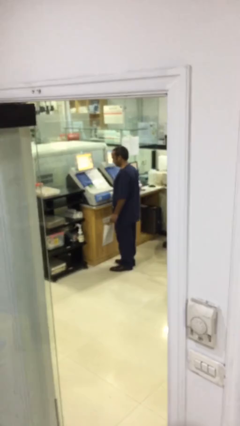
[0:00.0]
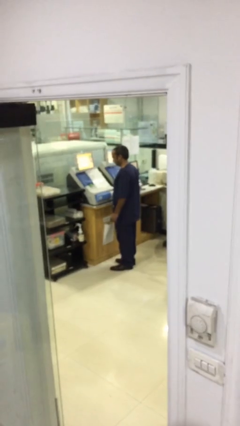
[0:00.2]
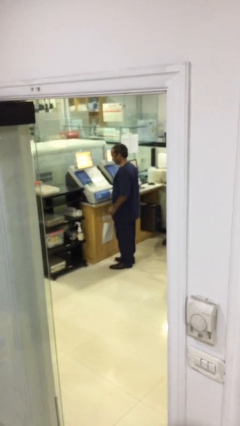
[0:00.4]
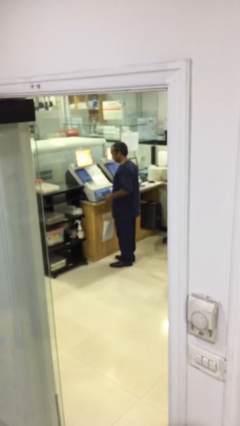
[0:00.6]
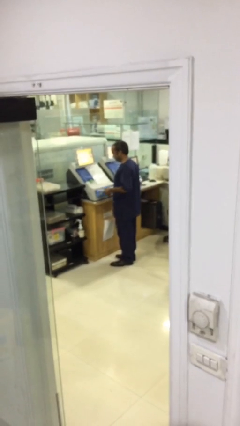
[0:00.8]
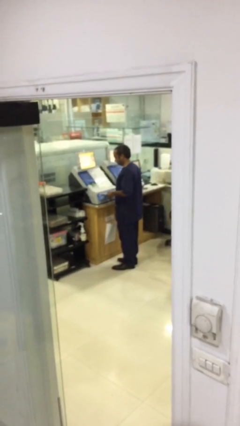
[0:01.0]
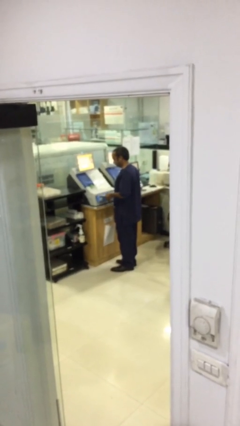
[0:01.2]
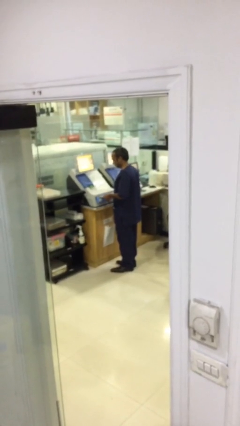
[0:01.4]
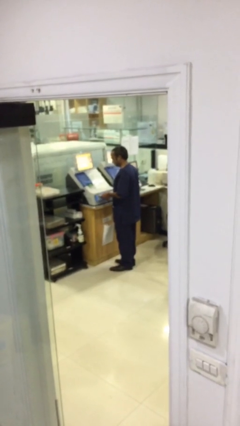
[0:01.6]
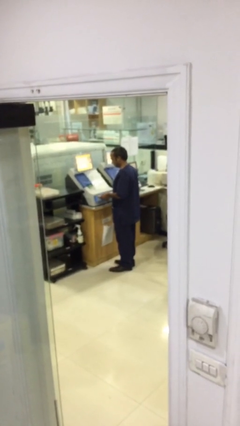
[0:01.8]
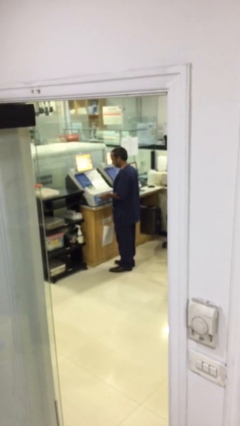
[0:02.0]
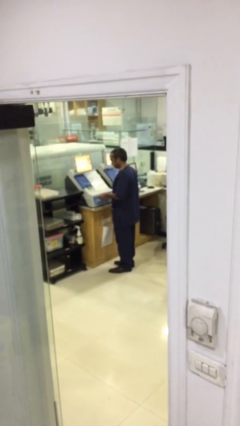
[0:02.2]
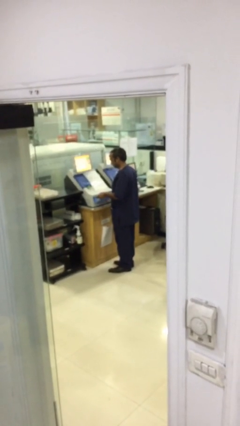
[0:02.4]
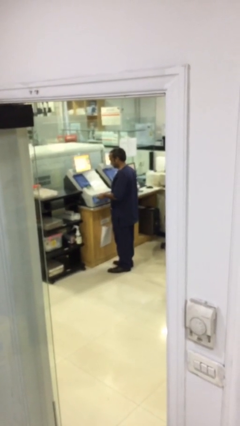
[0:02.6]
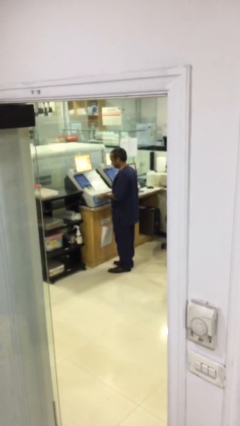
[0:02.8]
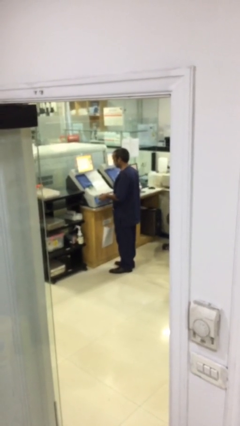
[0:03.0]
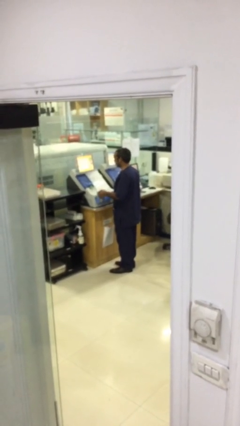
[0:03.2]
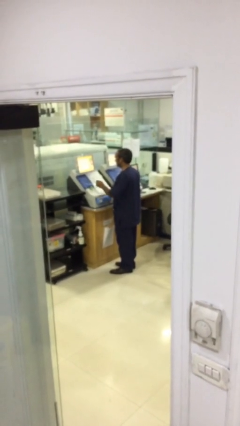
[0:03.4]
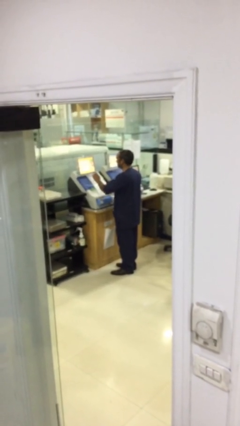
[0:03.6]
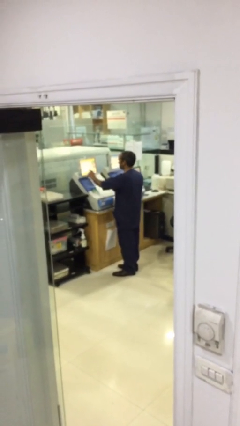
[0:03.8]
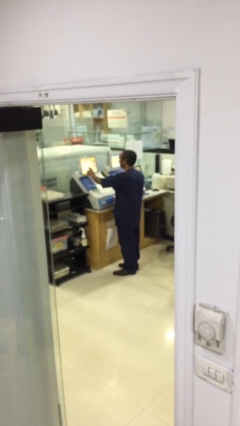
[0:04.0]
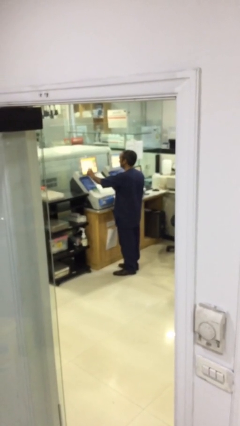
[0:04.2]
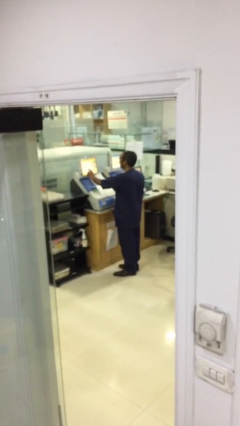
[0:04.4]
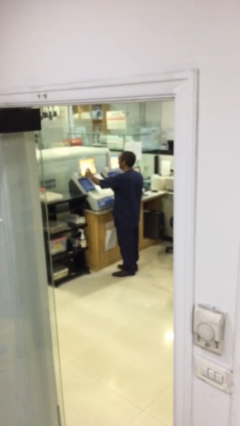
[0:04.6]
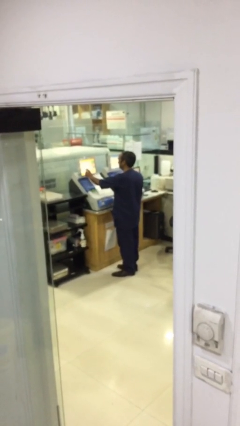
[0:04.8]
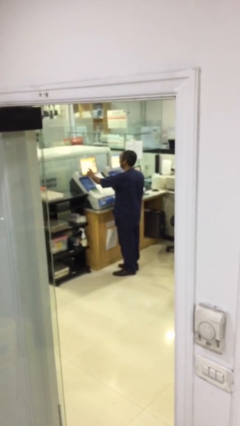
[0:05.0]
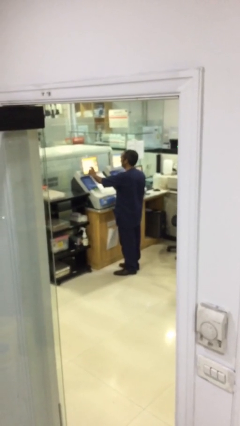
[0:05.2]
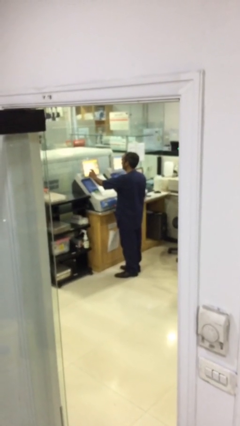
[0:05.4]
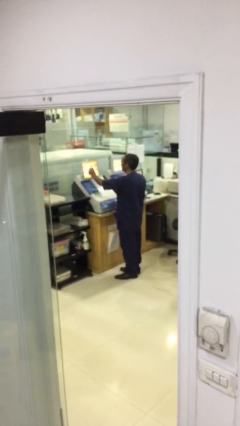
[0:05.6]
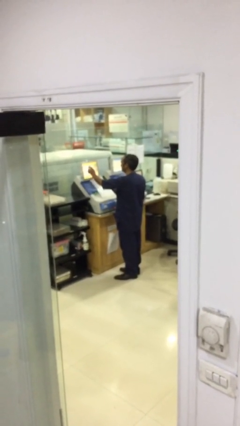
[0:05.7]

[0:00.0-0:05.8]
person purchases from machine

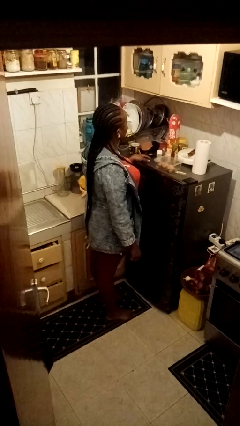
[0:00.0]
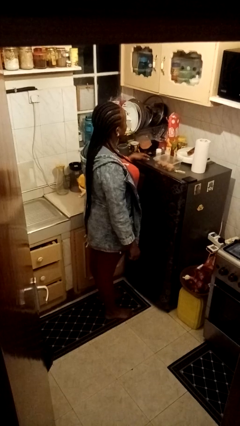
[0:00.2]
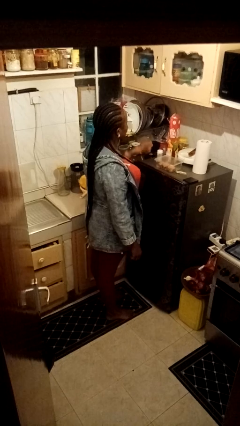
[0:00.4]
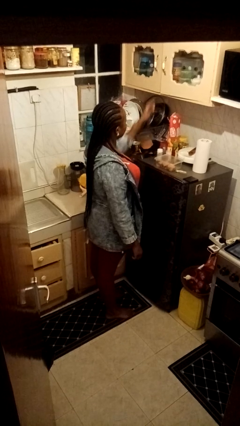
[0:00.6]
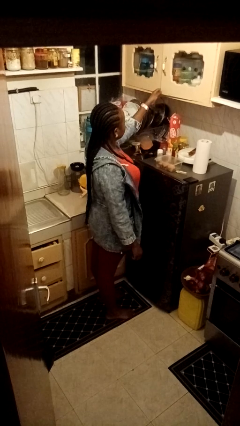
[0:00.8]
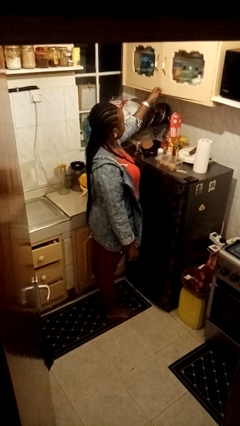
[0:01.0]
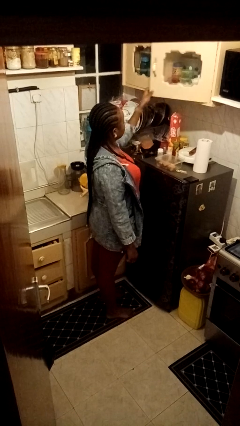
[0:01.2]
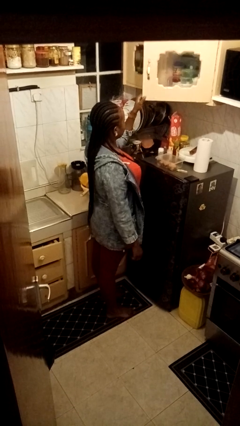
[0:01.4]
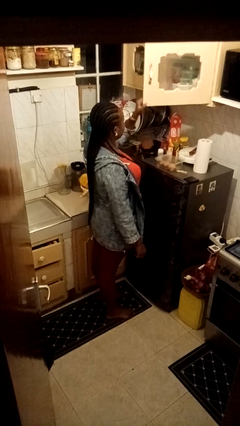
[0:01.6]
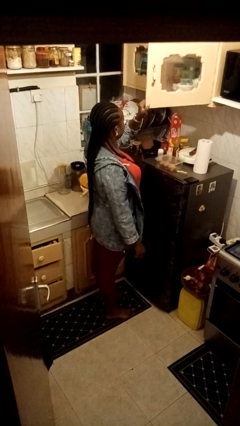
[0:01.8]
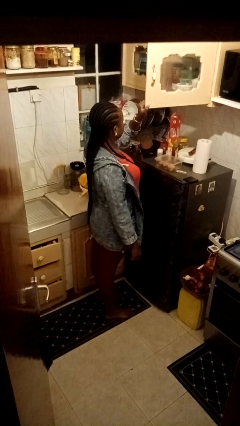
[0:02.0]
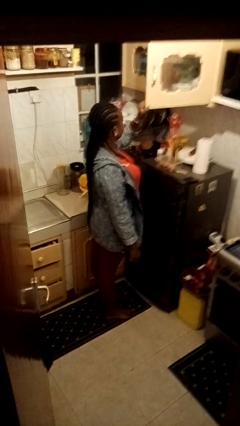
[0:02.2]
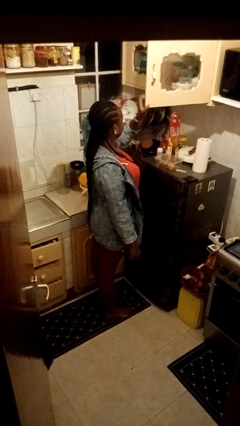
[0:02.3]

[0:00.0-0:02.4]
person opens cabinet

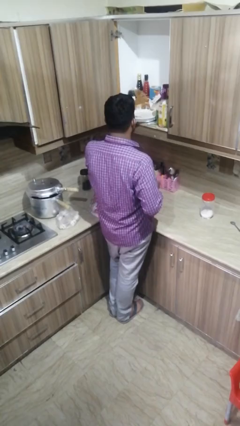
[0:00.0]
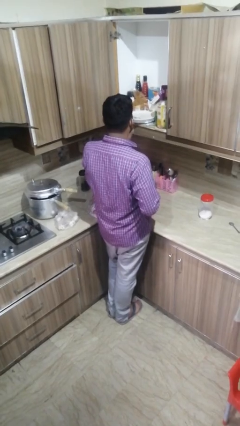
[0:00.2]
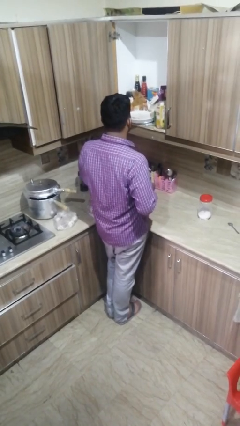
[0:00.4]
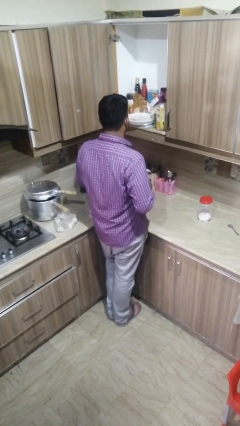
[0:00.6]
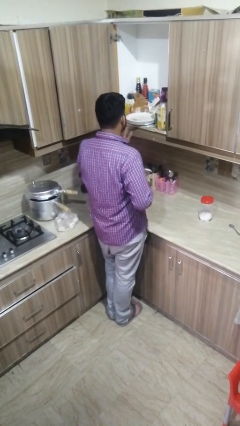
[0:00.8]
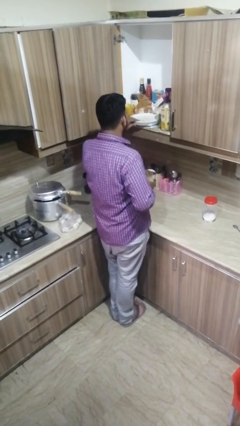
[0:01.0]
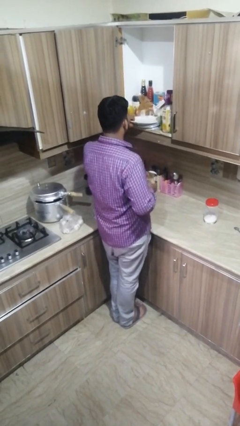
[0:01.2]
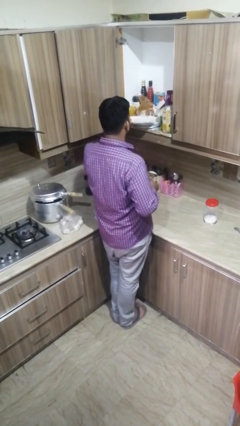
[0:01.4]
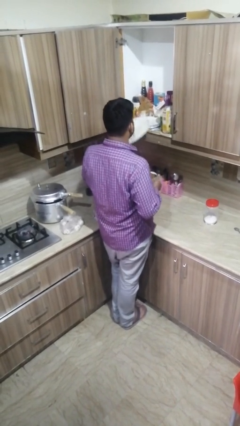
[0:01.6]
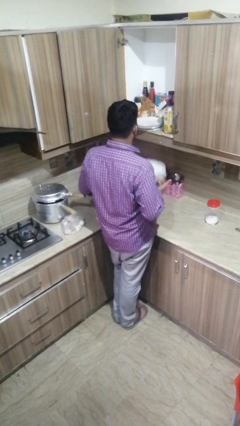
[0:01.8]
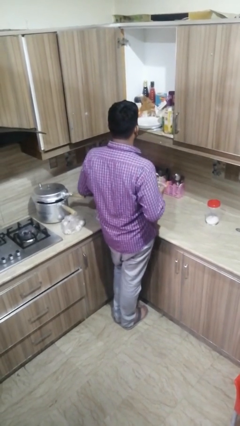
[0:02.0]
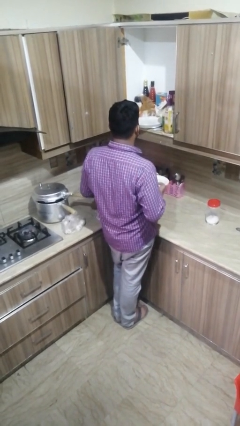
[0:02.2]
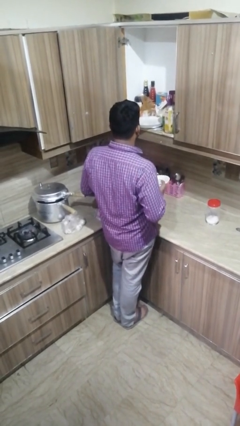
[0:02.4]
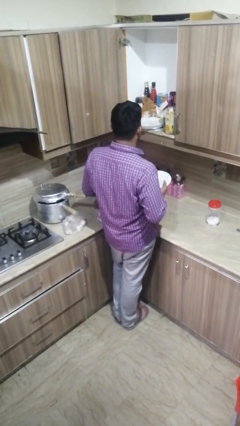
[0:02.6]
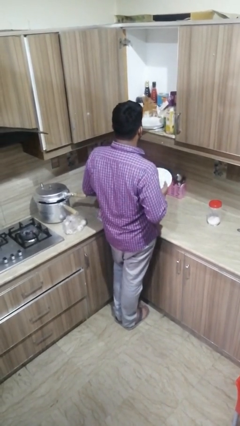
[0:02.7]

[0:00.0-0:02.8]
person takes object from cabinet

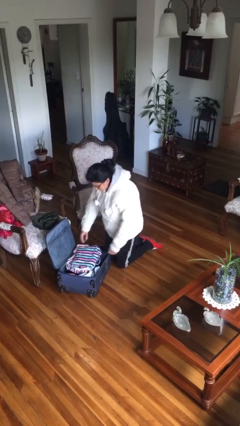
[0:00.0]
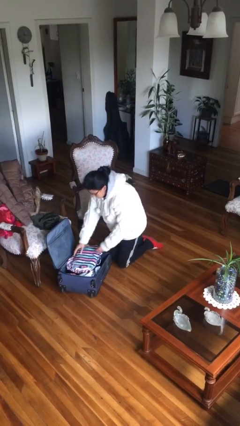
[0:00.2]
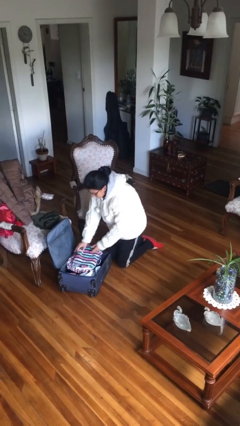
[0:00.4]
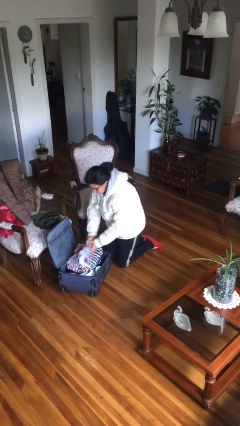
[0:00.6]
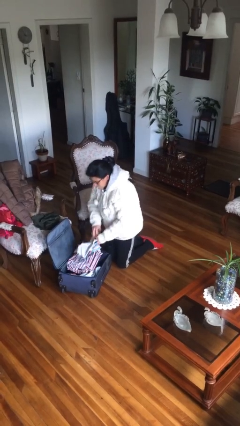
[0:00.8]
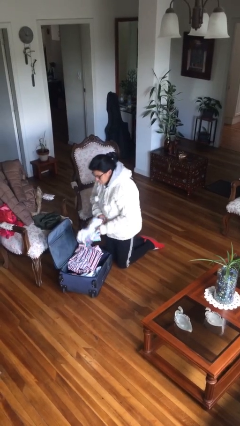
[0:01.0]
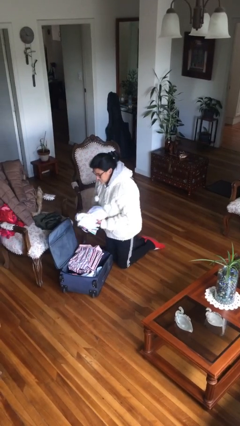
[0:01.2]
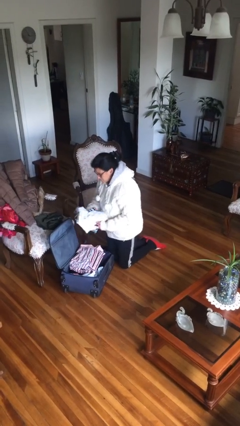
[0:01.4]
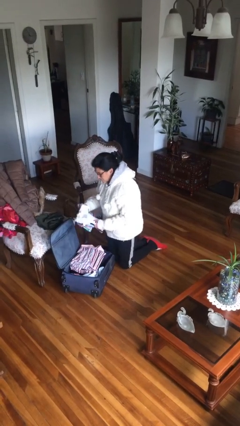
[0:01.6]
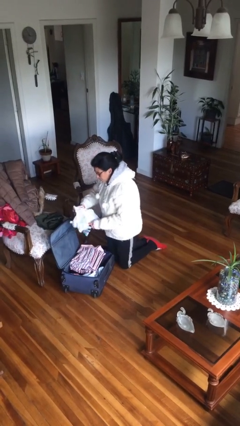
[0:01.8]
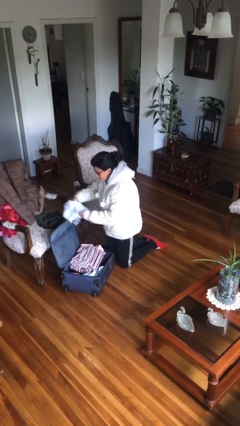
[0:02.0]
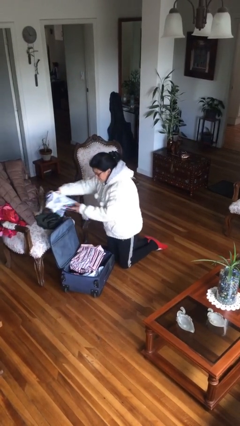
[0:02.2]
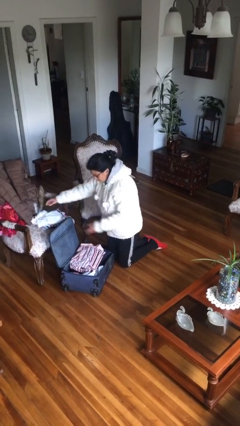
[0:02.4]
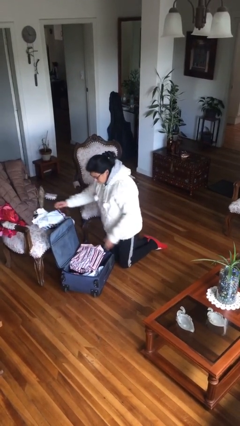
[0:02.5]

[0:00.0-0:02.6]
person unloads clothes from suitcase

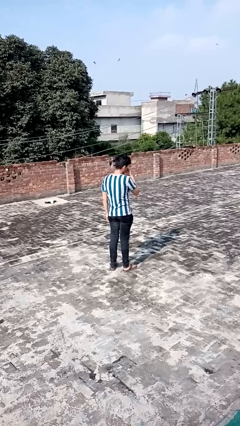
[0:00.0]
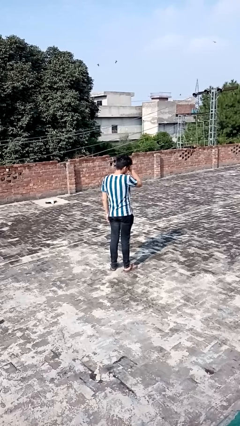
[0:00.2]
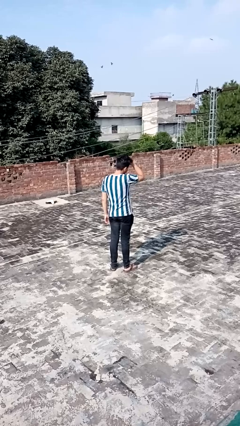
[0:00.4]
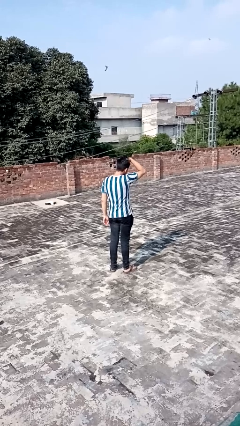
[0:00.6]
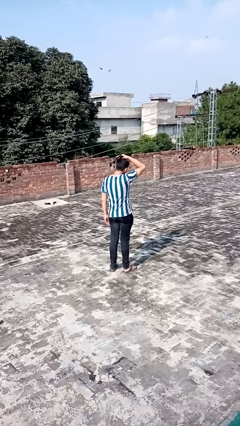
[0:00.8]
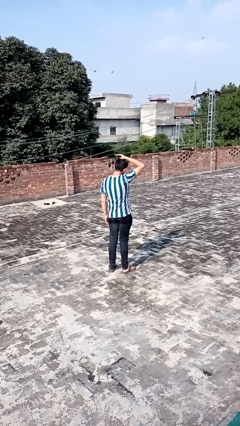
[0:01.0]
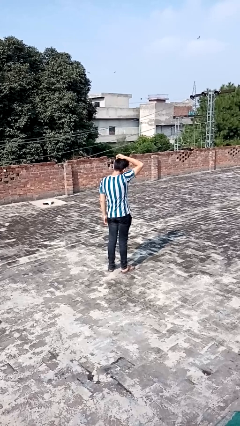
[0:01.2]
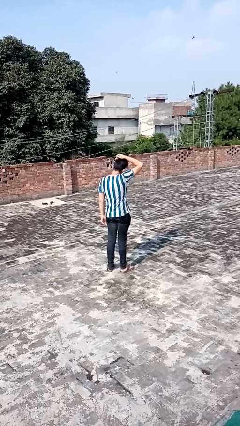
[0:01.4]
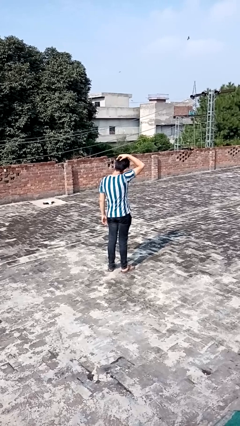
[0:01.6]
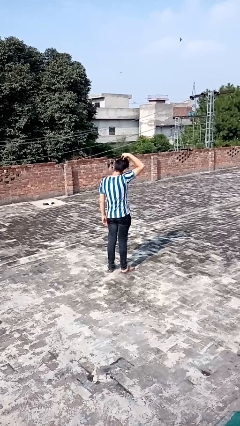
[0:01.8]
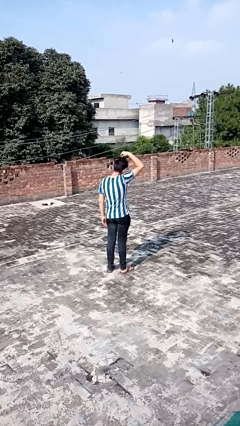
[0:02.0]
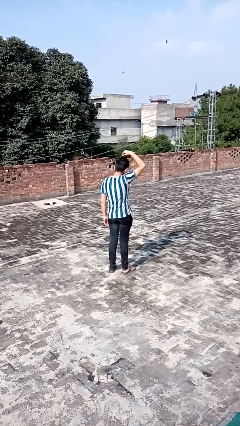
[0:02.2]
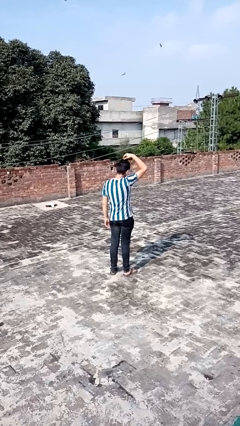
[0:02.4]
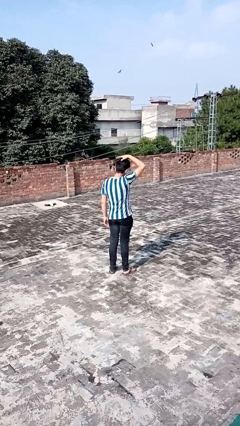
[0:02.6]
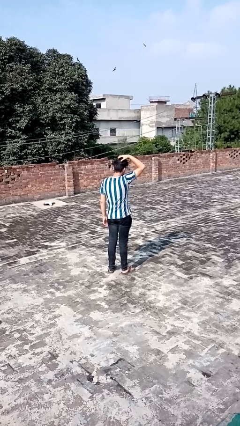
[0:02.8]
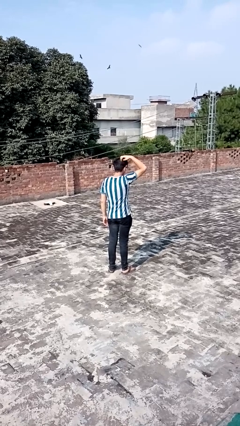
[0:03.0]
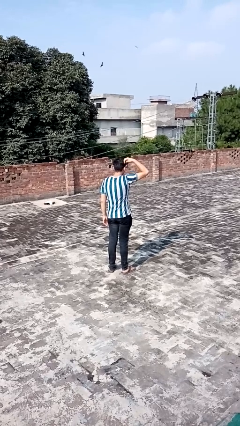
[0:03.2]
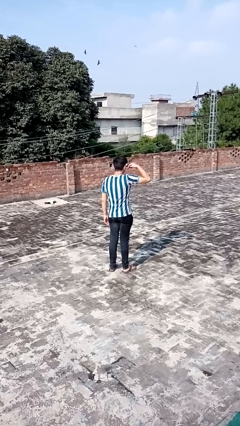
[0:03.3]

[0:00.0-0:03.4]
person strokes hair

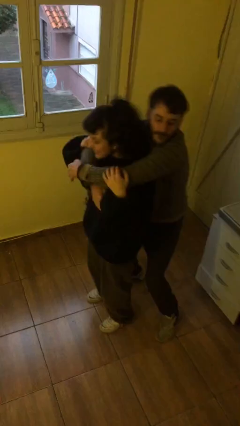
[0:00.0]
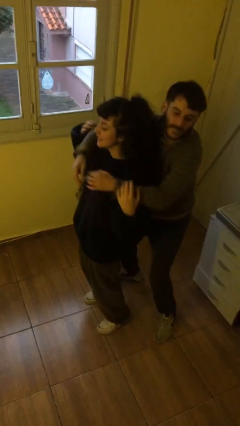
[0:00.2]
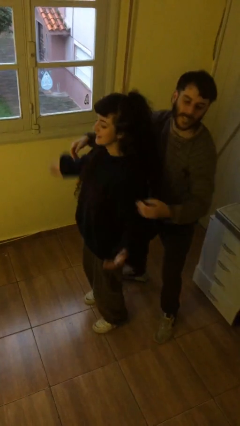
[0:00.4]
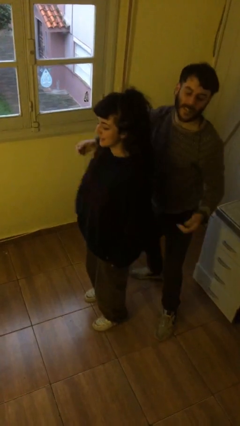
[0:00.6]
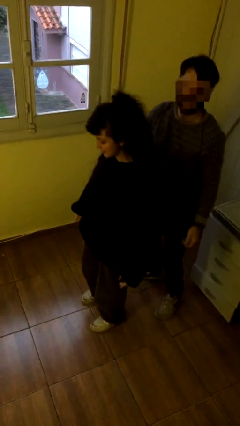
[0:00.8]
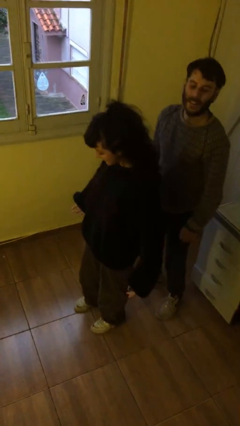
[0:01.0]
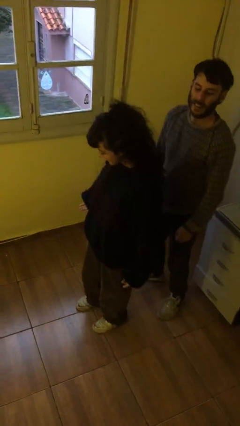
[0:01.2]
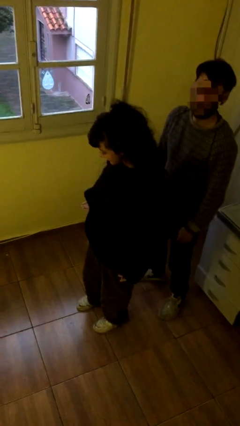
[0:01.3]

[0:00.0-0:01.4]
person puts down person
